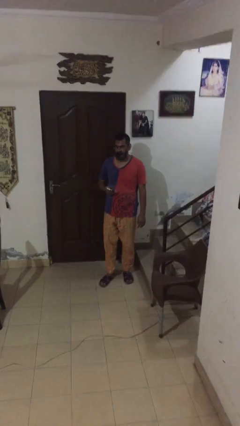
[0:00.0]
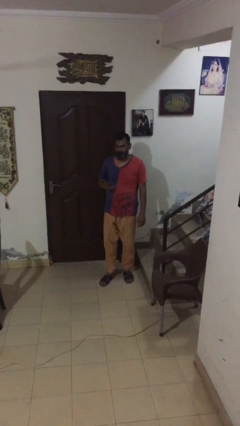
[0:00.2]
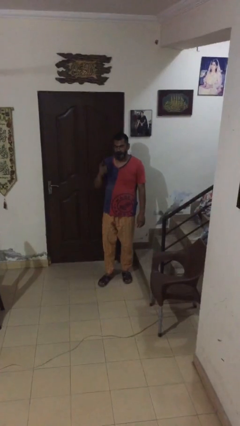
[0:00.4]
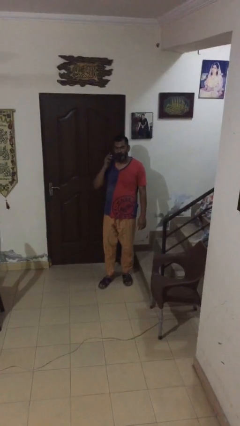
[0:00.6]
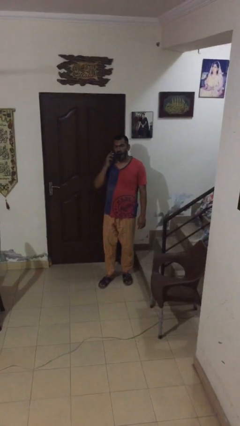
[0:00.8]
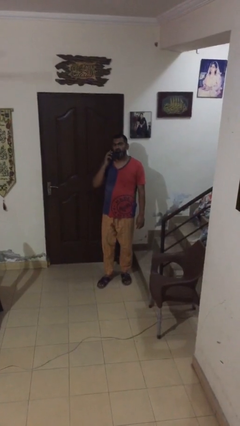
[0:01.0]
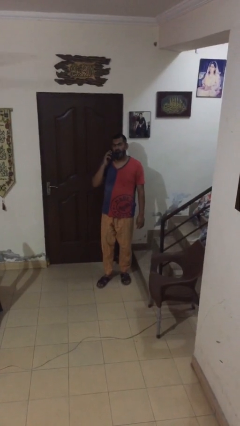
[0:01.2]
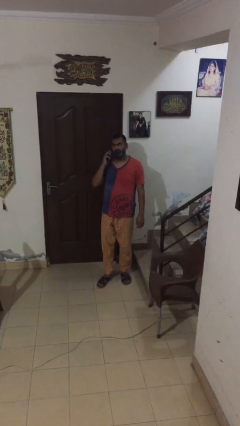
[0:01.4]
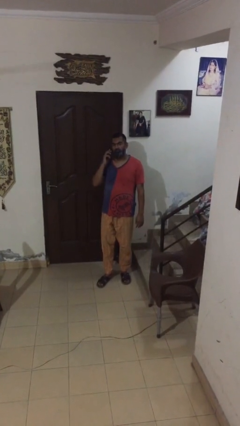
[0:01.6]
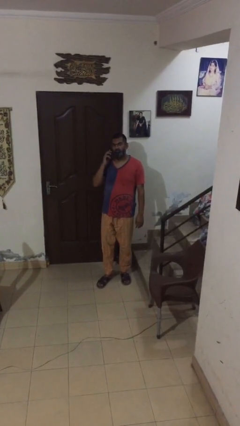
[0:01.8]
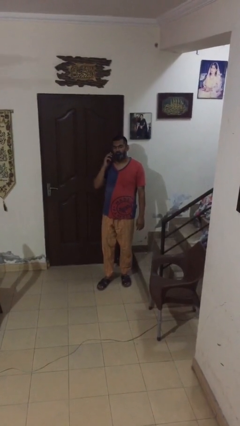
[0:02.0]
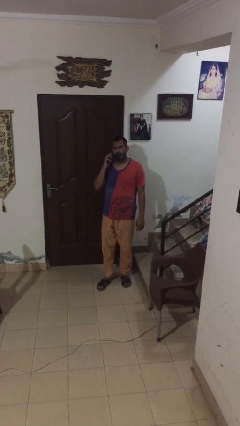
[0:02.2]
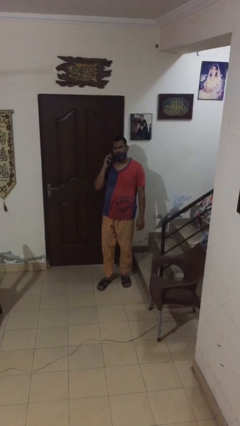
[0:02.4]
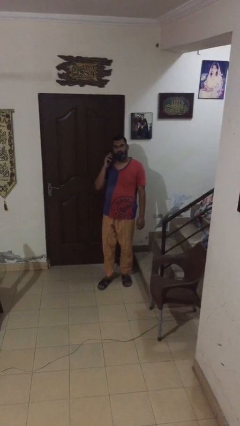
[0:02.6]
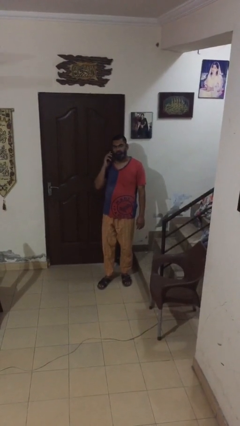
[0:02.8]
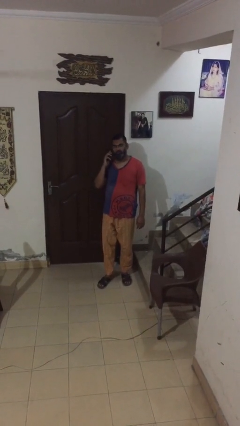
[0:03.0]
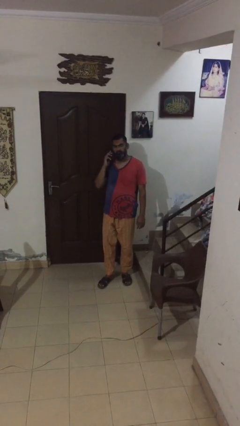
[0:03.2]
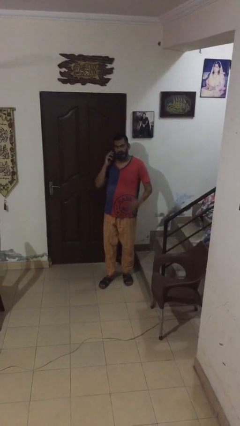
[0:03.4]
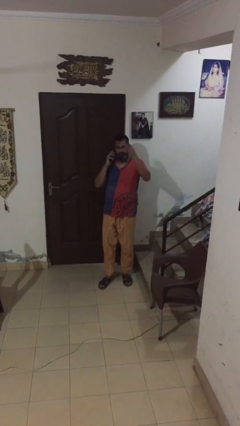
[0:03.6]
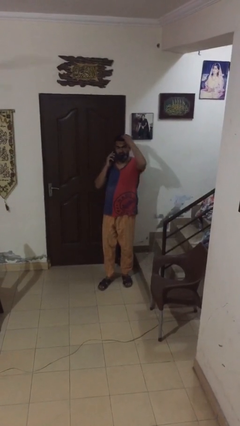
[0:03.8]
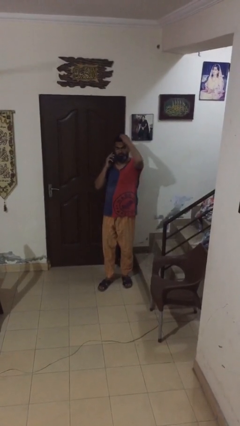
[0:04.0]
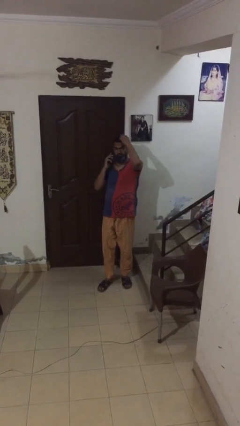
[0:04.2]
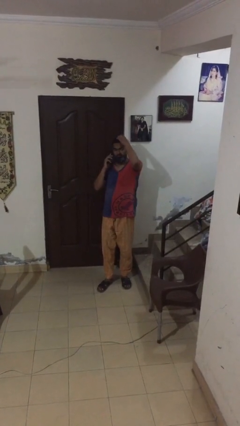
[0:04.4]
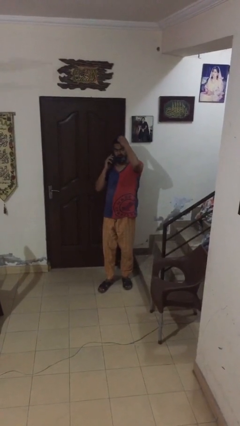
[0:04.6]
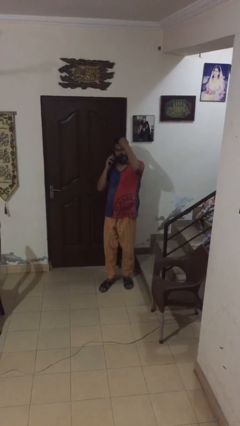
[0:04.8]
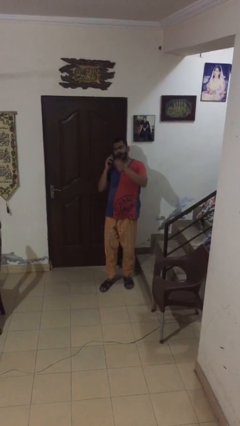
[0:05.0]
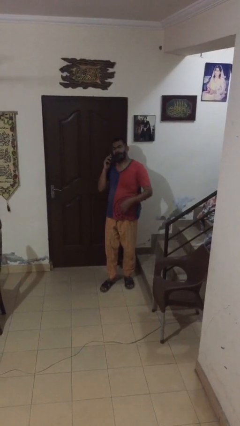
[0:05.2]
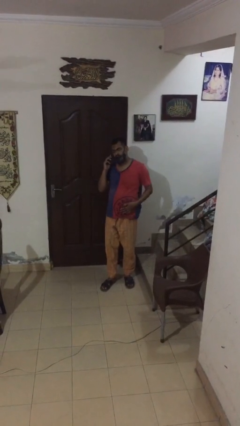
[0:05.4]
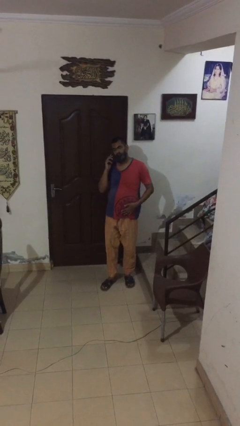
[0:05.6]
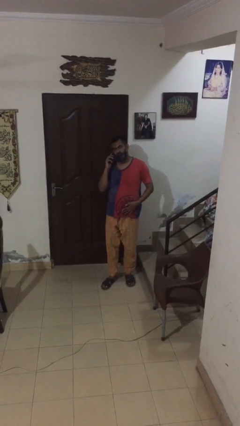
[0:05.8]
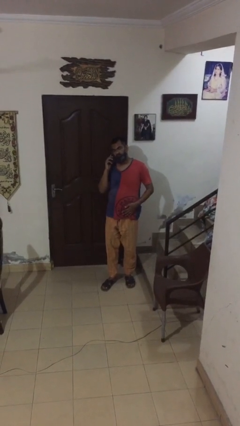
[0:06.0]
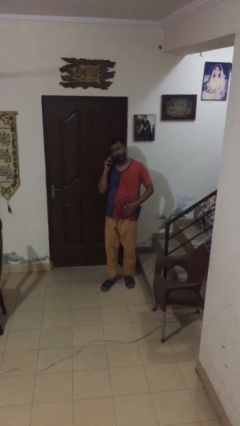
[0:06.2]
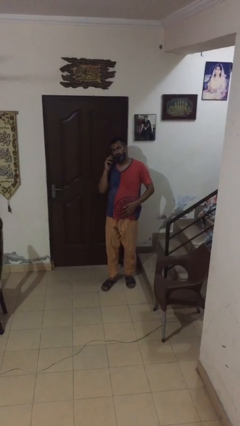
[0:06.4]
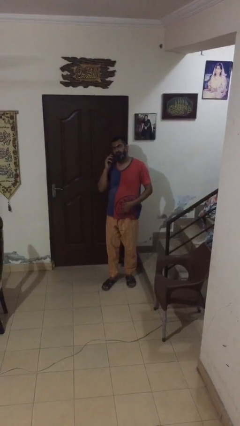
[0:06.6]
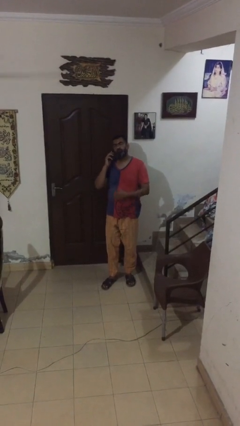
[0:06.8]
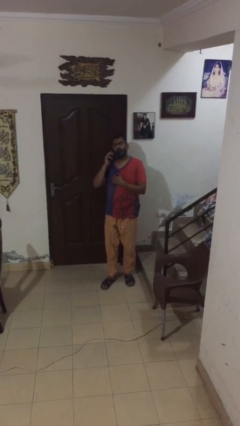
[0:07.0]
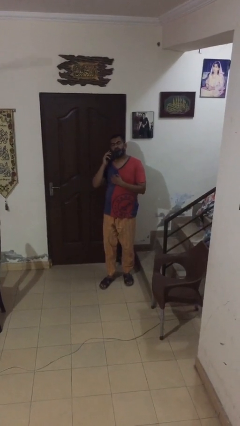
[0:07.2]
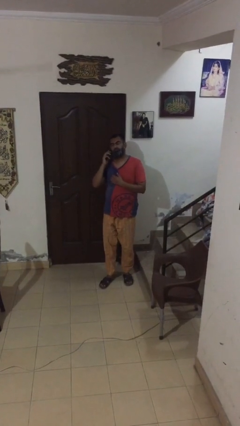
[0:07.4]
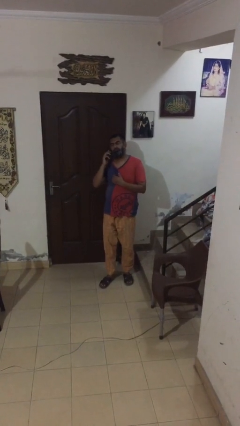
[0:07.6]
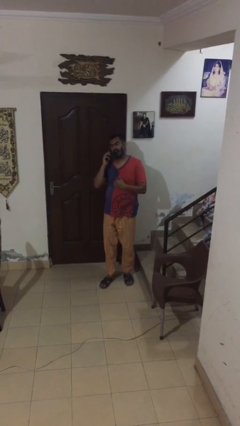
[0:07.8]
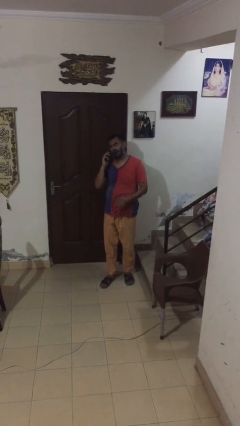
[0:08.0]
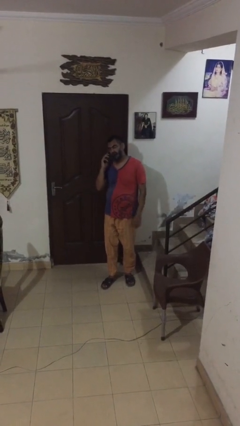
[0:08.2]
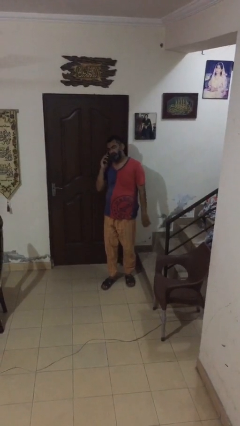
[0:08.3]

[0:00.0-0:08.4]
person talks on phone

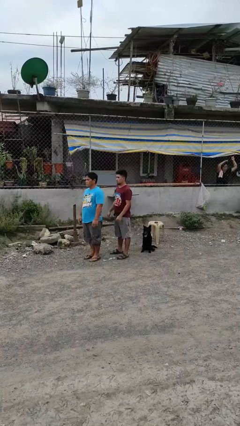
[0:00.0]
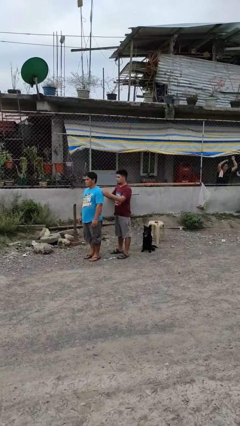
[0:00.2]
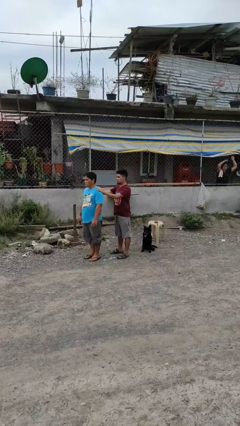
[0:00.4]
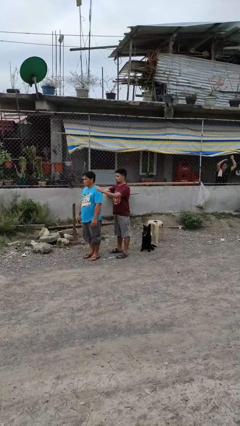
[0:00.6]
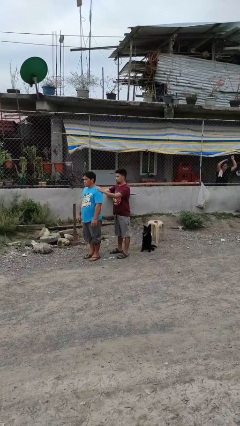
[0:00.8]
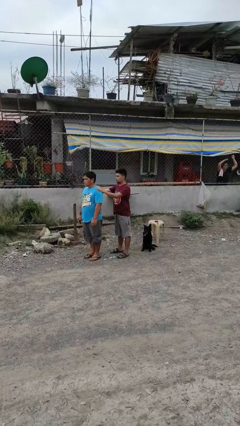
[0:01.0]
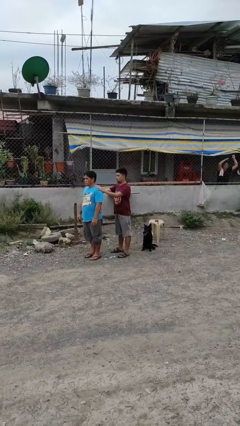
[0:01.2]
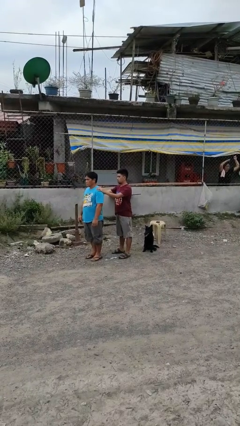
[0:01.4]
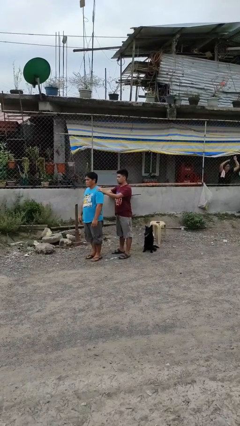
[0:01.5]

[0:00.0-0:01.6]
person grabs person by shoulder

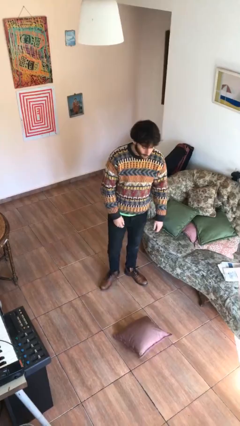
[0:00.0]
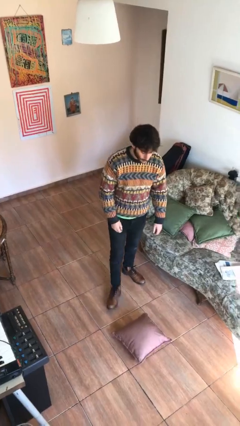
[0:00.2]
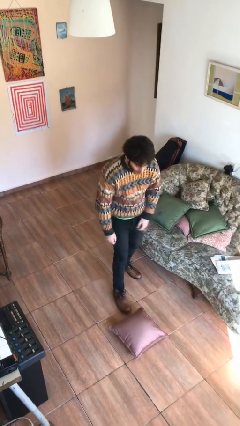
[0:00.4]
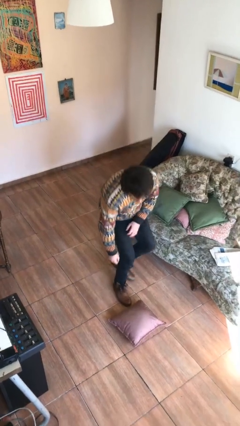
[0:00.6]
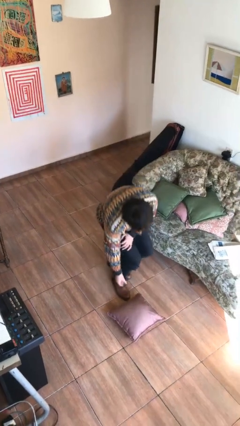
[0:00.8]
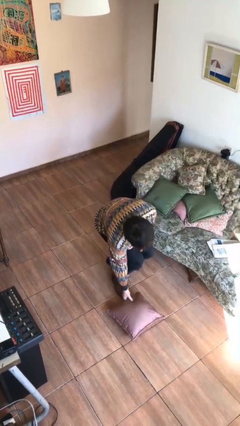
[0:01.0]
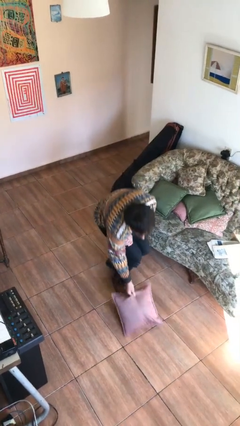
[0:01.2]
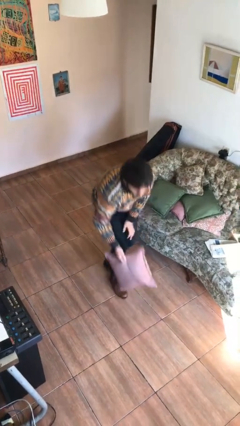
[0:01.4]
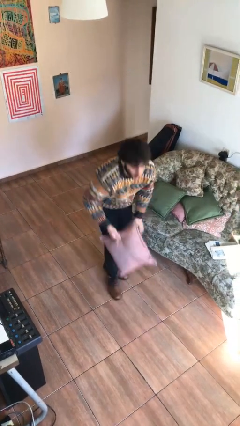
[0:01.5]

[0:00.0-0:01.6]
person picks up object from floor

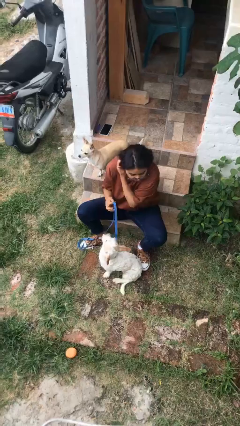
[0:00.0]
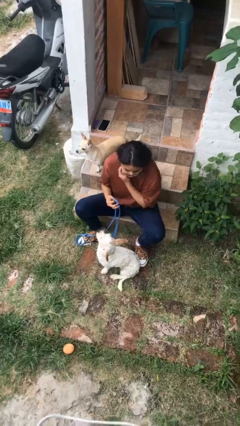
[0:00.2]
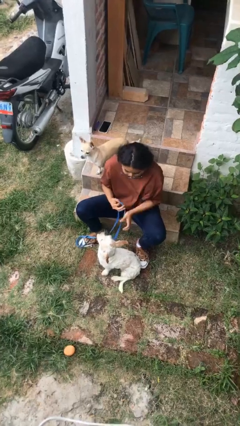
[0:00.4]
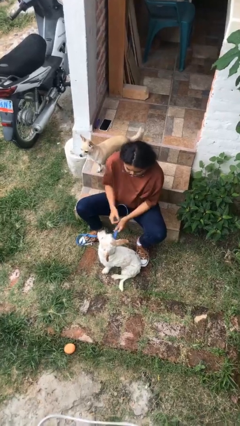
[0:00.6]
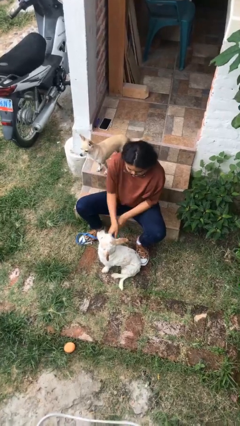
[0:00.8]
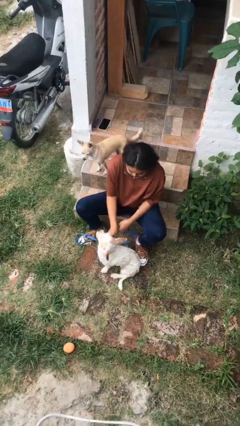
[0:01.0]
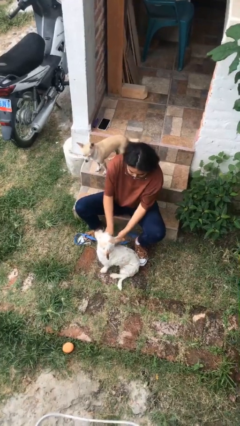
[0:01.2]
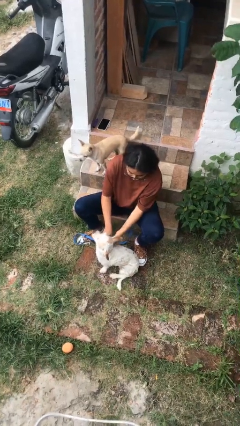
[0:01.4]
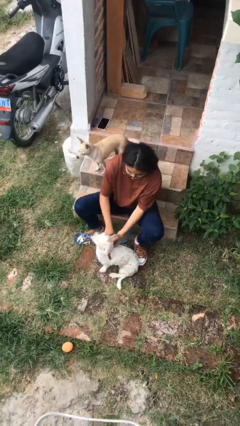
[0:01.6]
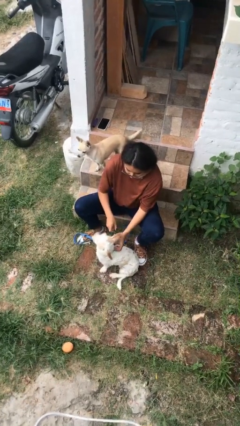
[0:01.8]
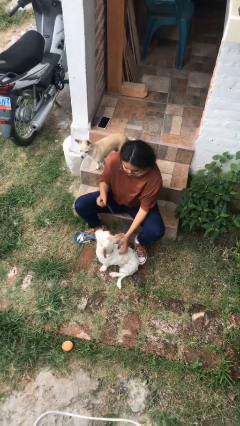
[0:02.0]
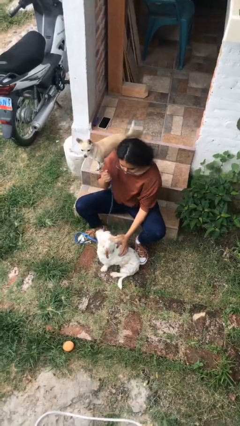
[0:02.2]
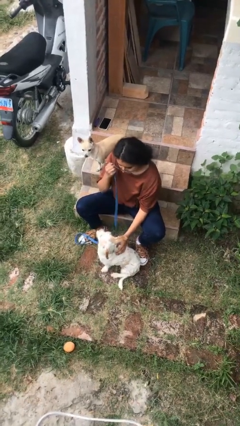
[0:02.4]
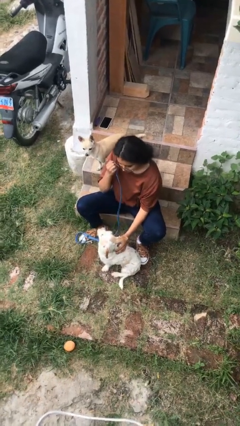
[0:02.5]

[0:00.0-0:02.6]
person unattaches leash from dog

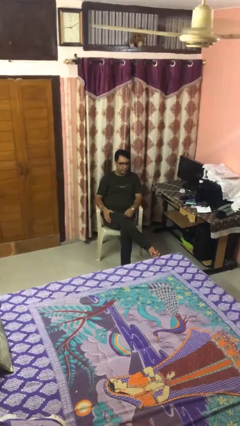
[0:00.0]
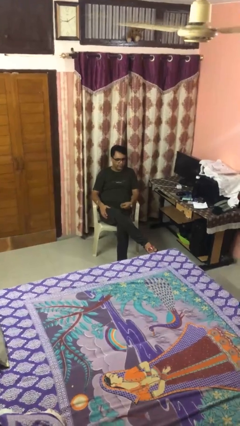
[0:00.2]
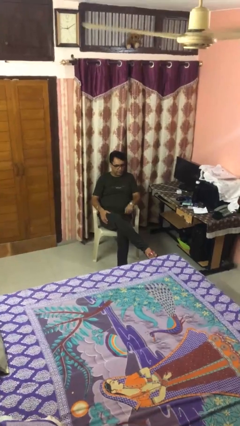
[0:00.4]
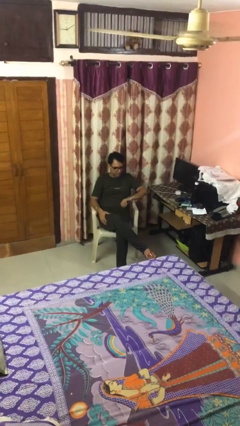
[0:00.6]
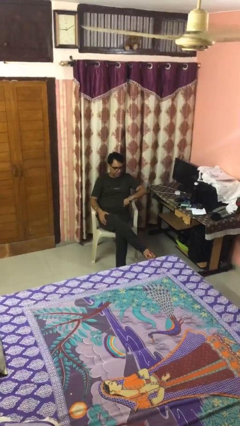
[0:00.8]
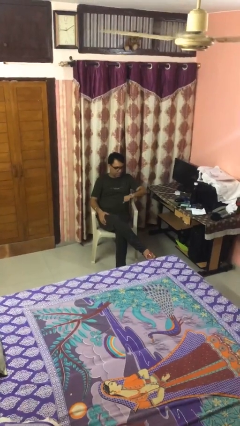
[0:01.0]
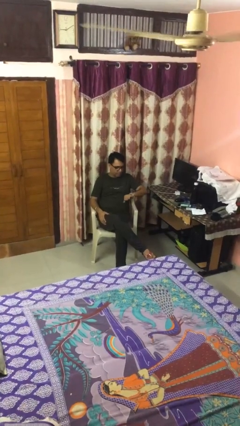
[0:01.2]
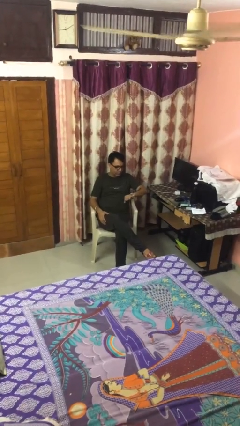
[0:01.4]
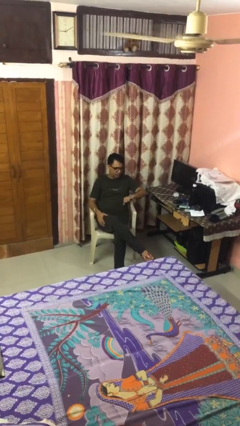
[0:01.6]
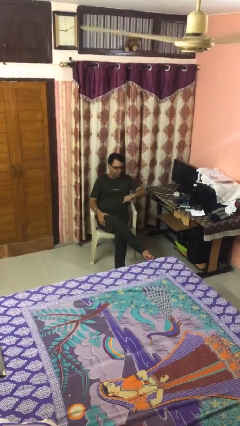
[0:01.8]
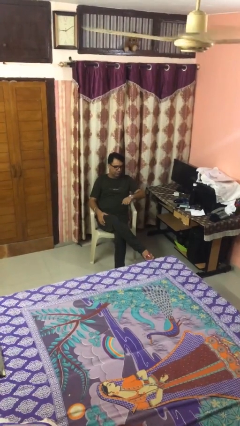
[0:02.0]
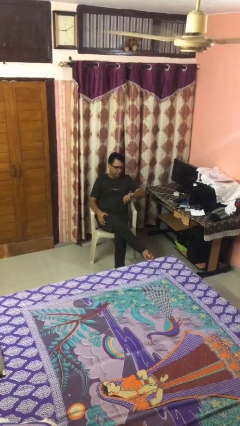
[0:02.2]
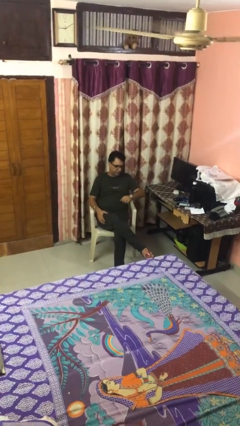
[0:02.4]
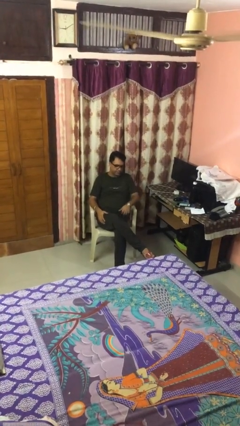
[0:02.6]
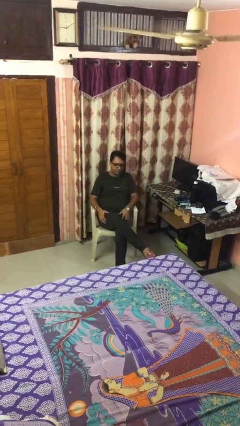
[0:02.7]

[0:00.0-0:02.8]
person looks at wristwatch

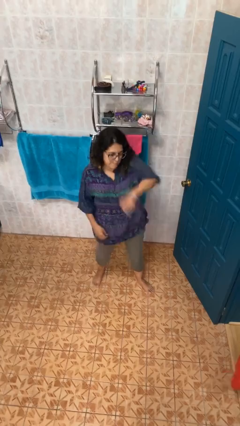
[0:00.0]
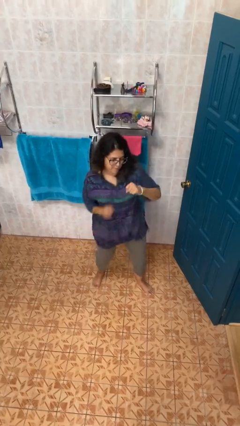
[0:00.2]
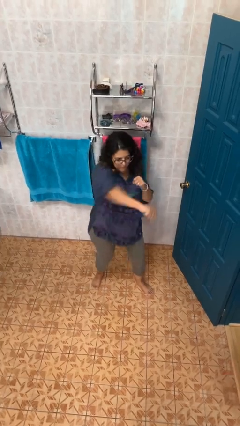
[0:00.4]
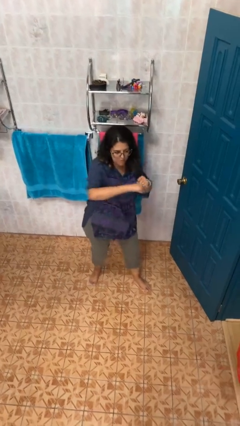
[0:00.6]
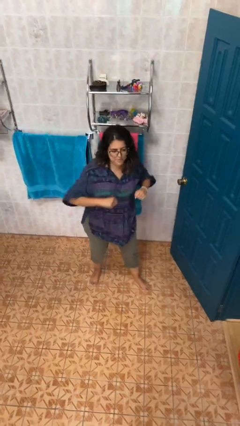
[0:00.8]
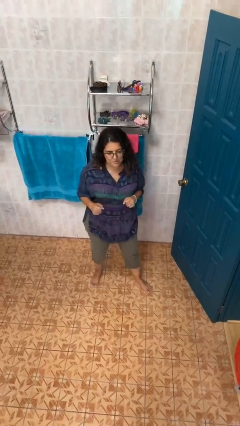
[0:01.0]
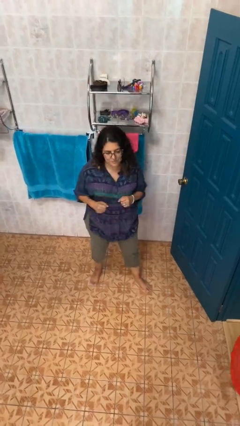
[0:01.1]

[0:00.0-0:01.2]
person punches
